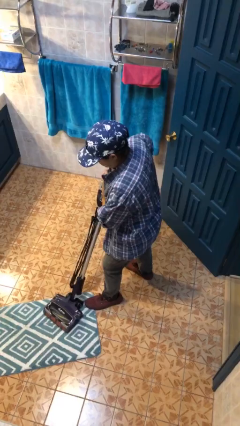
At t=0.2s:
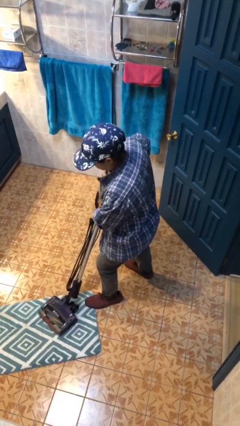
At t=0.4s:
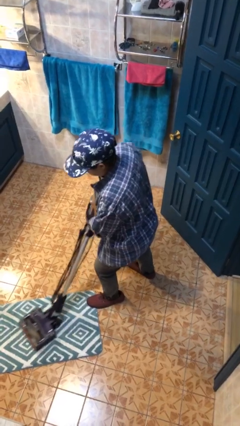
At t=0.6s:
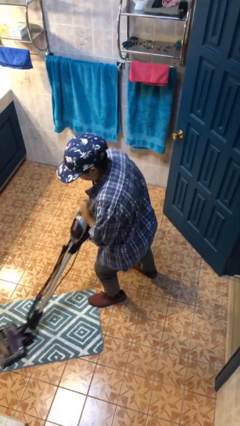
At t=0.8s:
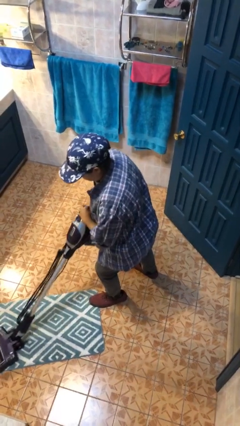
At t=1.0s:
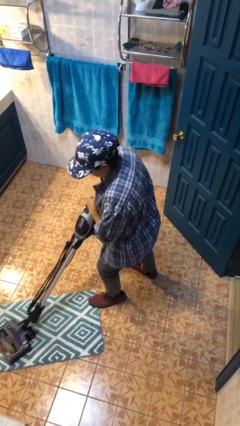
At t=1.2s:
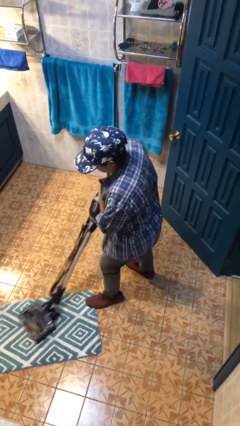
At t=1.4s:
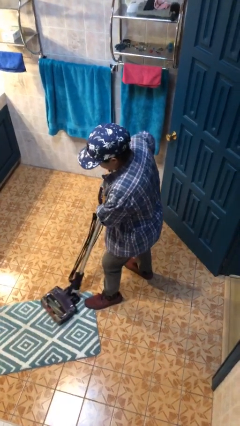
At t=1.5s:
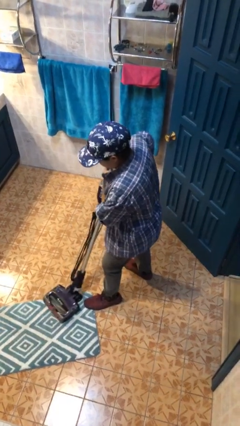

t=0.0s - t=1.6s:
person vacuums carpet

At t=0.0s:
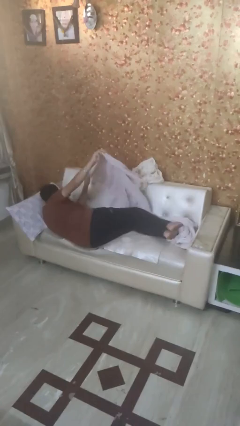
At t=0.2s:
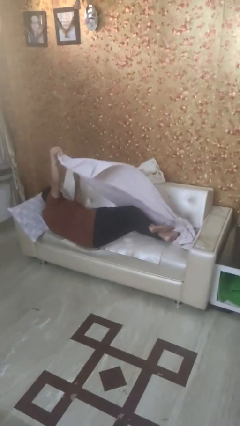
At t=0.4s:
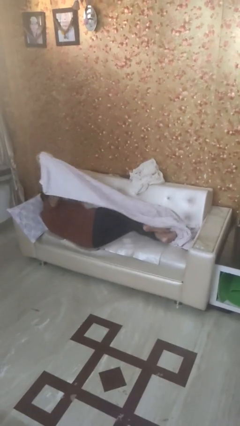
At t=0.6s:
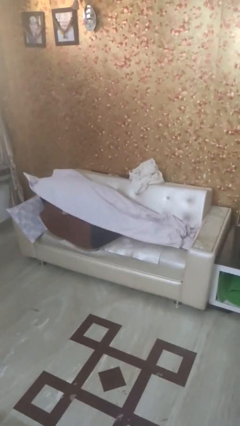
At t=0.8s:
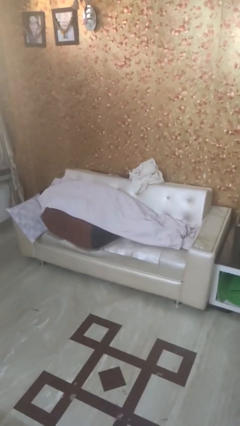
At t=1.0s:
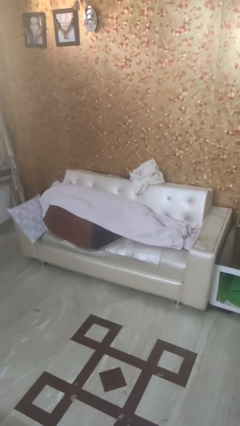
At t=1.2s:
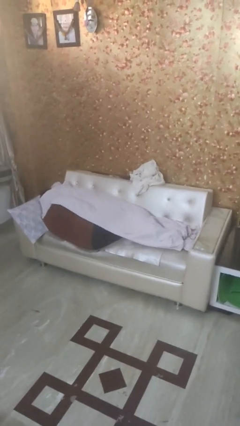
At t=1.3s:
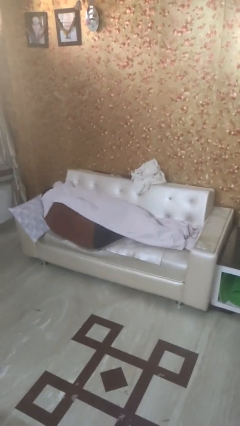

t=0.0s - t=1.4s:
person covers with bedsheets

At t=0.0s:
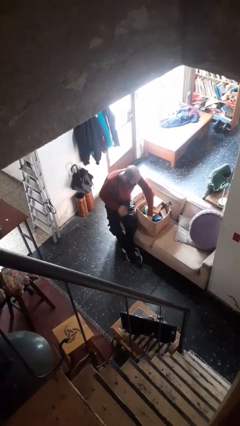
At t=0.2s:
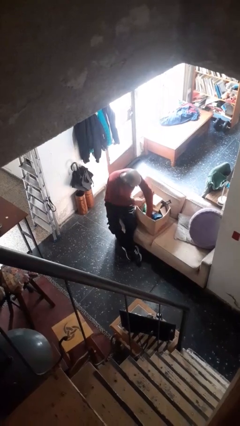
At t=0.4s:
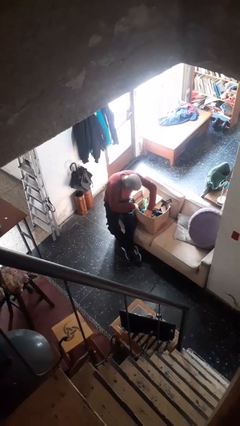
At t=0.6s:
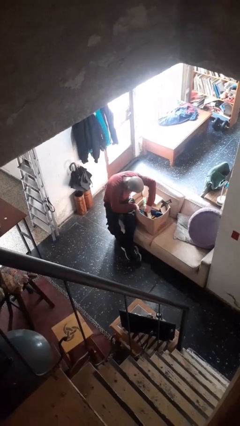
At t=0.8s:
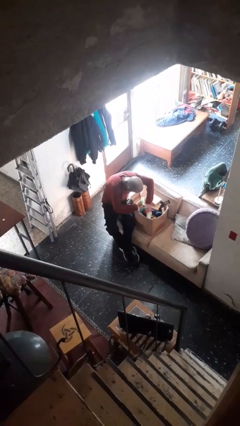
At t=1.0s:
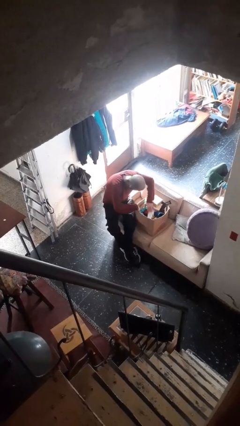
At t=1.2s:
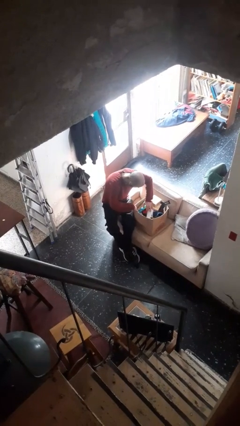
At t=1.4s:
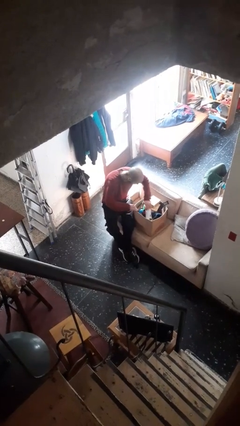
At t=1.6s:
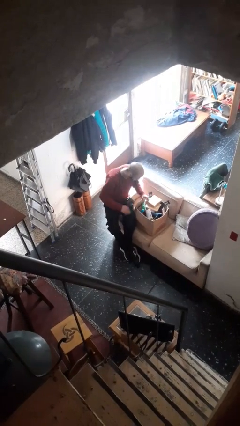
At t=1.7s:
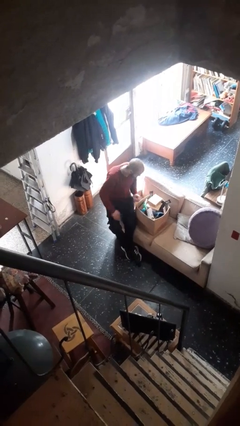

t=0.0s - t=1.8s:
person searches in box

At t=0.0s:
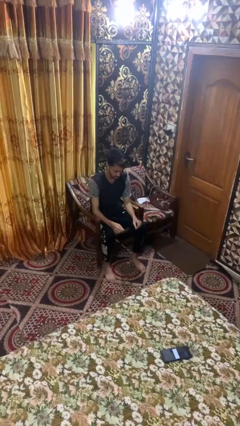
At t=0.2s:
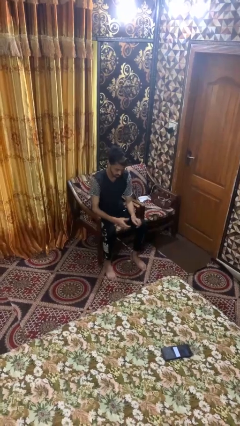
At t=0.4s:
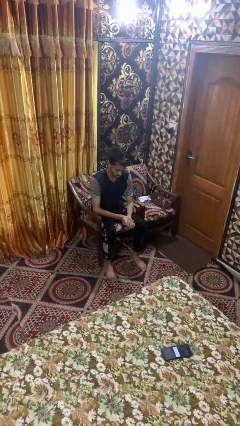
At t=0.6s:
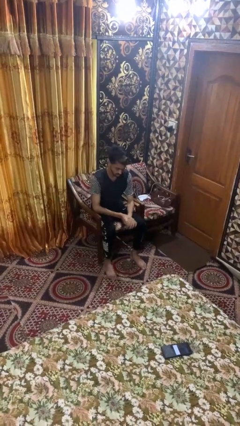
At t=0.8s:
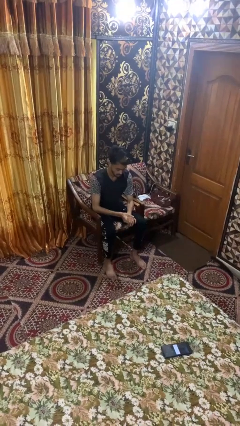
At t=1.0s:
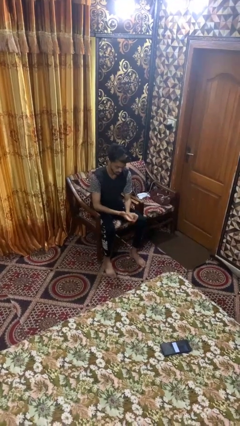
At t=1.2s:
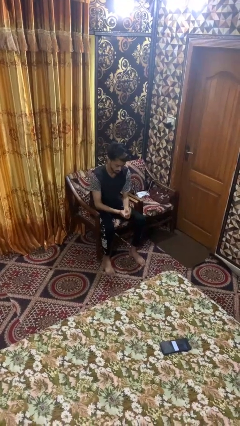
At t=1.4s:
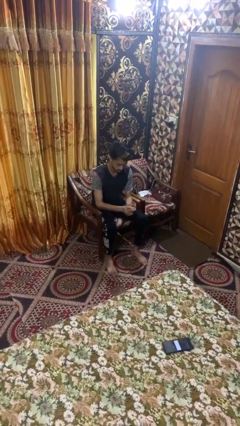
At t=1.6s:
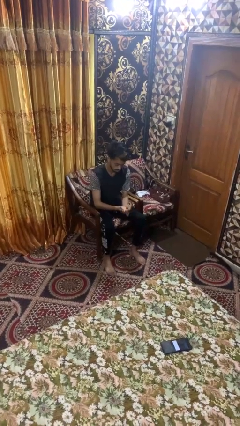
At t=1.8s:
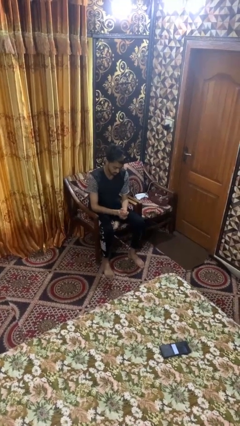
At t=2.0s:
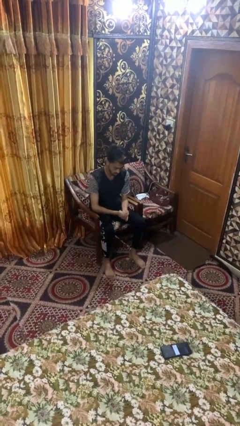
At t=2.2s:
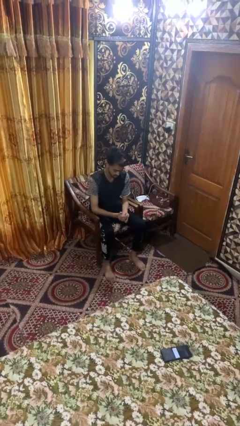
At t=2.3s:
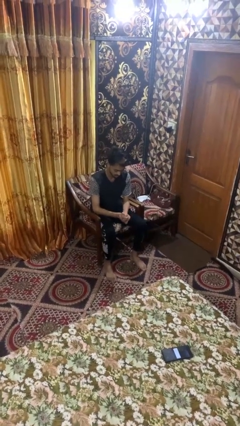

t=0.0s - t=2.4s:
person looks at hands in lap

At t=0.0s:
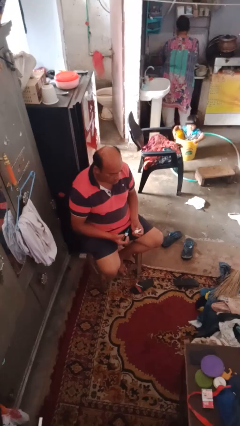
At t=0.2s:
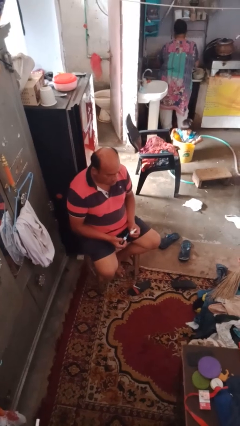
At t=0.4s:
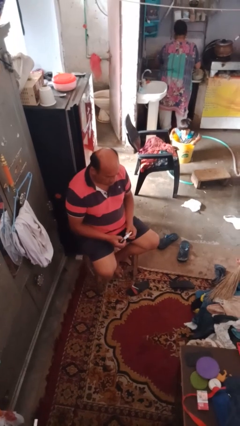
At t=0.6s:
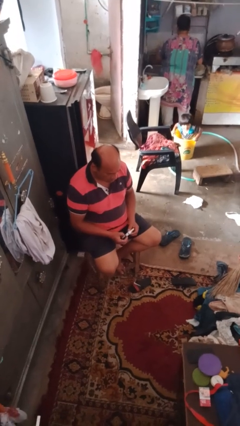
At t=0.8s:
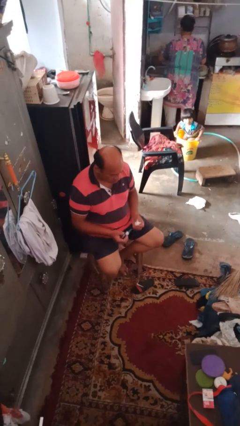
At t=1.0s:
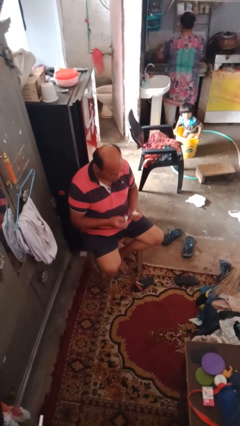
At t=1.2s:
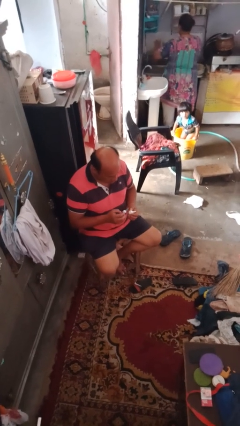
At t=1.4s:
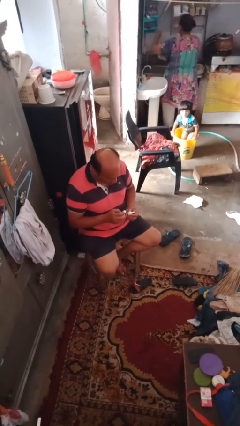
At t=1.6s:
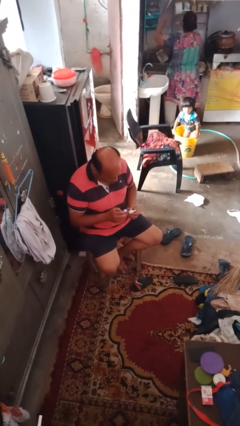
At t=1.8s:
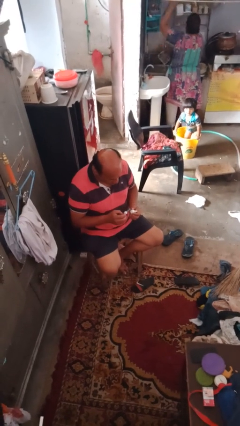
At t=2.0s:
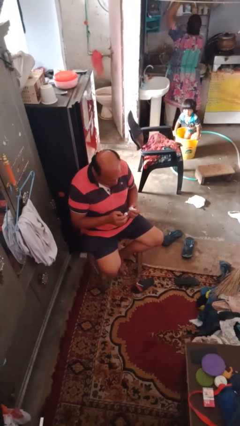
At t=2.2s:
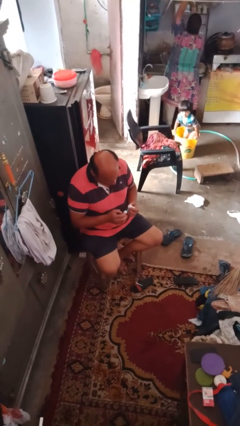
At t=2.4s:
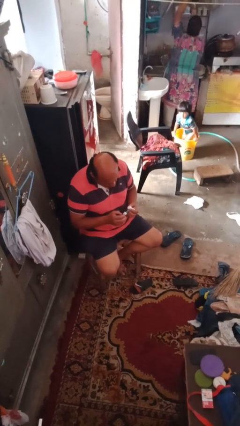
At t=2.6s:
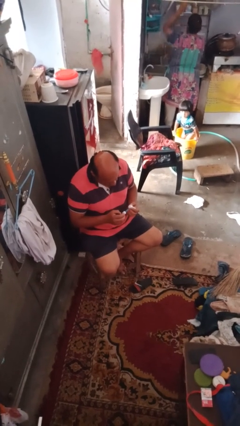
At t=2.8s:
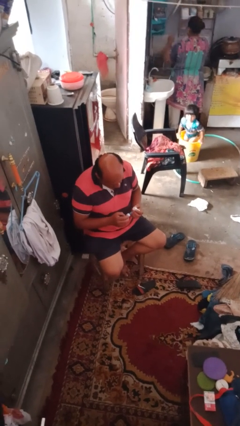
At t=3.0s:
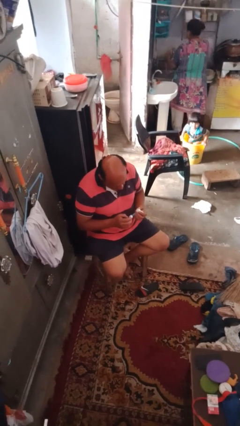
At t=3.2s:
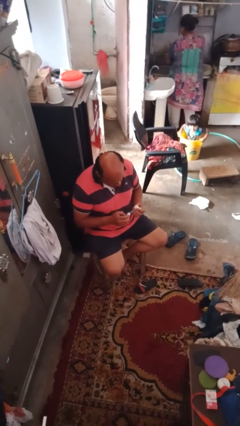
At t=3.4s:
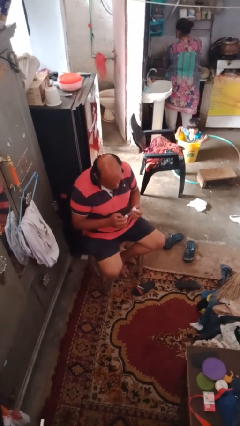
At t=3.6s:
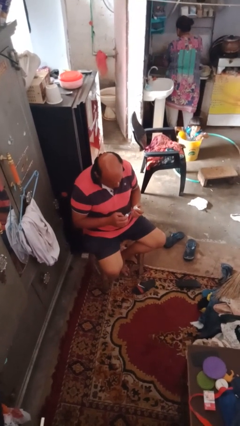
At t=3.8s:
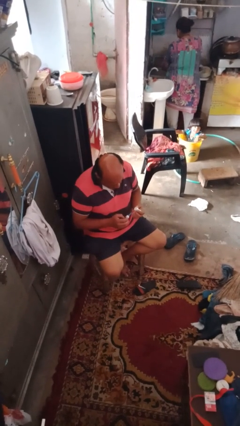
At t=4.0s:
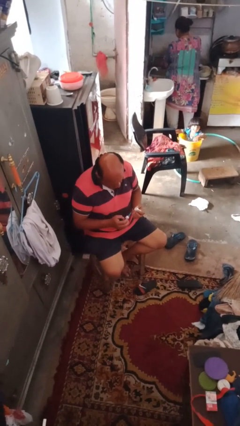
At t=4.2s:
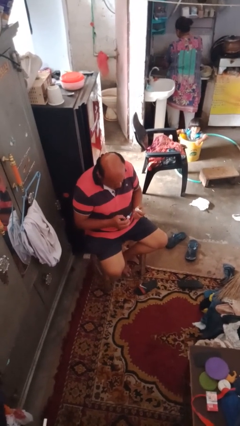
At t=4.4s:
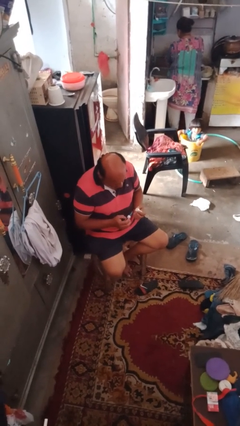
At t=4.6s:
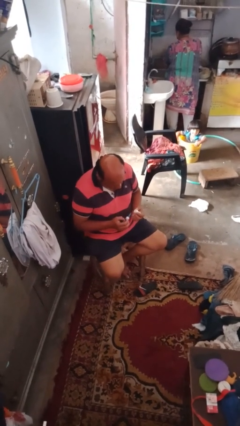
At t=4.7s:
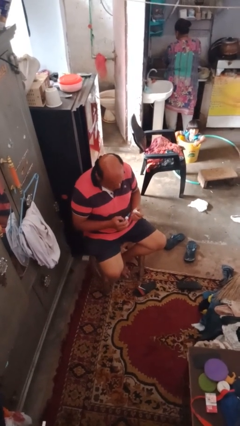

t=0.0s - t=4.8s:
person paints fingernails

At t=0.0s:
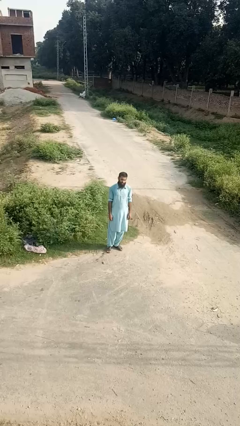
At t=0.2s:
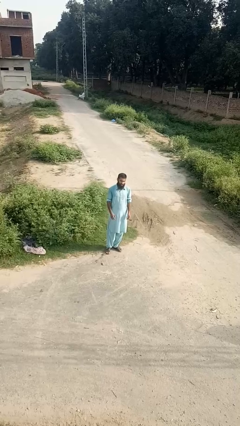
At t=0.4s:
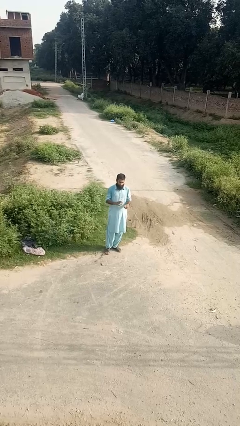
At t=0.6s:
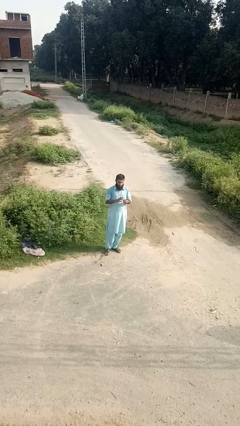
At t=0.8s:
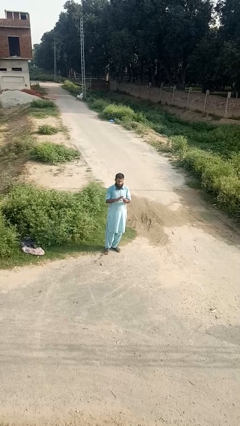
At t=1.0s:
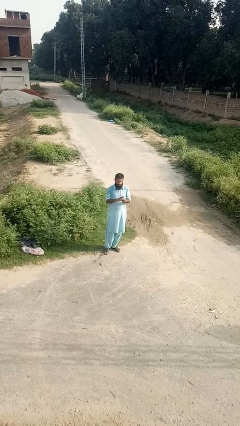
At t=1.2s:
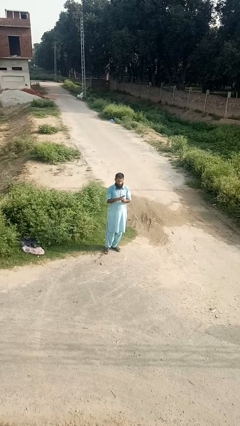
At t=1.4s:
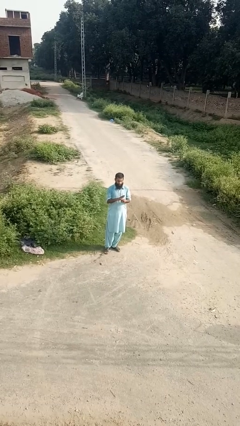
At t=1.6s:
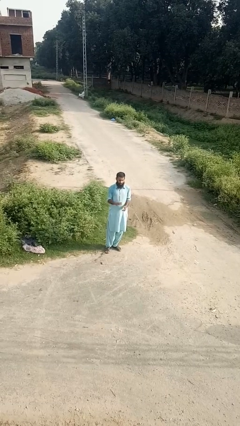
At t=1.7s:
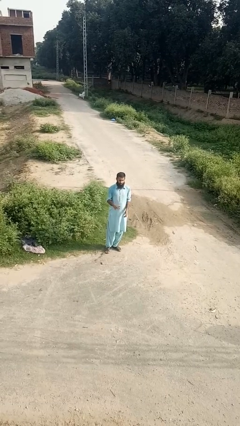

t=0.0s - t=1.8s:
person puts on ring

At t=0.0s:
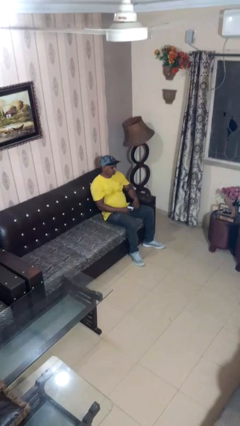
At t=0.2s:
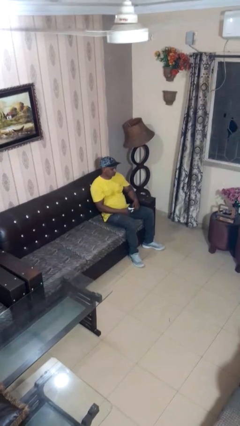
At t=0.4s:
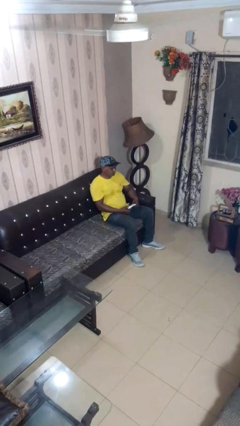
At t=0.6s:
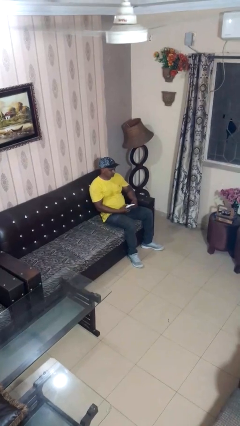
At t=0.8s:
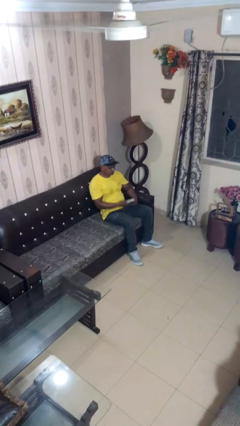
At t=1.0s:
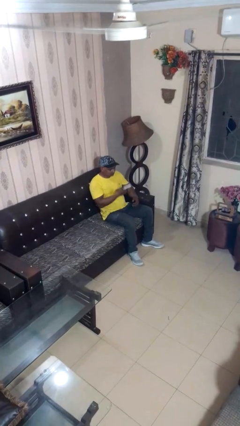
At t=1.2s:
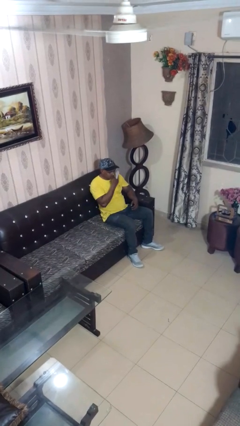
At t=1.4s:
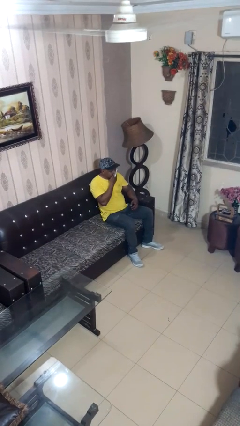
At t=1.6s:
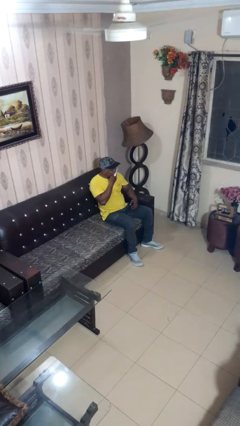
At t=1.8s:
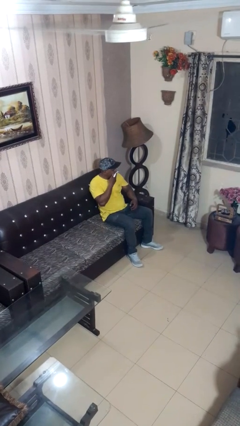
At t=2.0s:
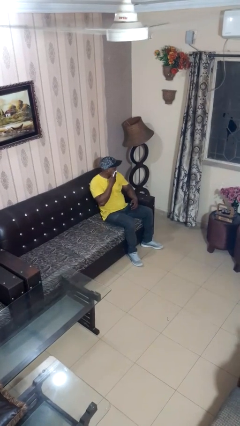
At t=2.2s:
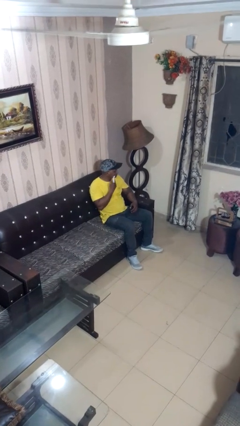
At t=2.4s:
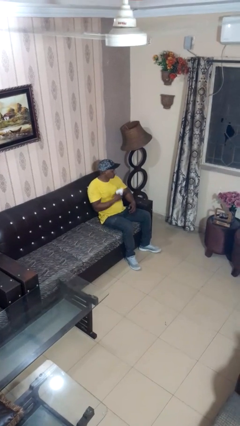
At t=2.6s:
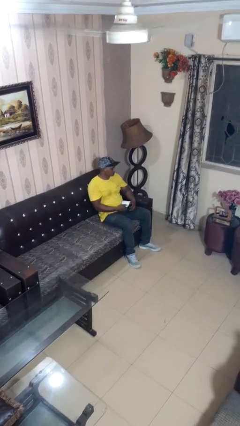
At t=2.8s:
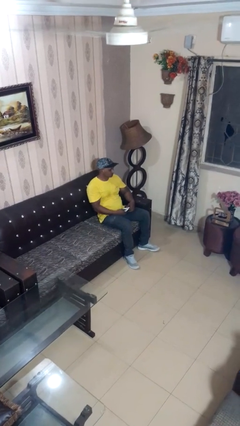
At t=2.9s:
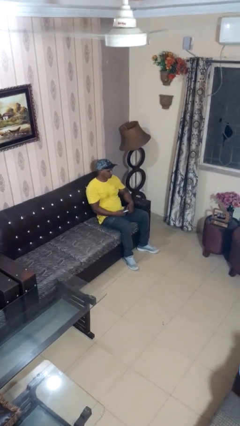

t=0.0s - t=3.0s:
person wipes mouth with napkin

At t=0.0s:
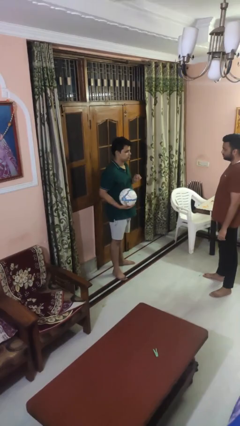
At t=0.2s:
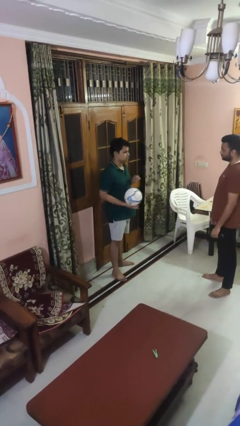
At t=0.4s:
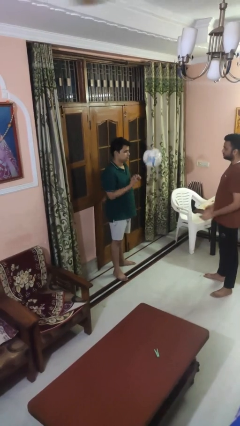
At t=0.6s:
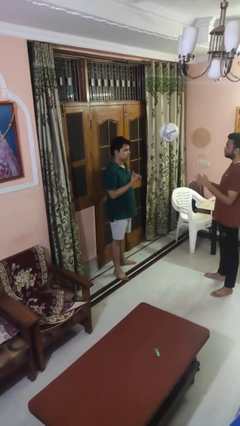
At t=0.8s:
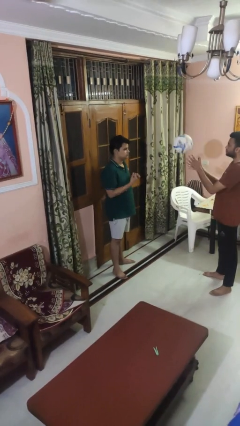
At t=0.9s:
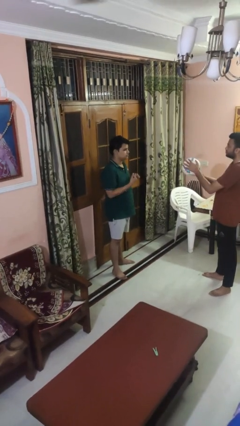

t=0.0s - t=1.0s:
person throws object to person
